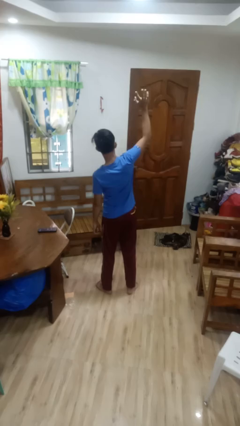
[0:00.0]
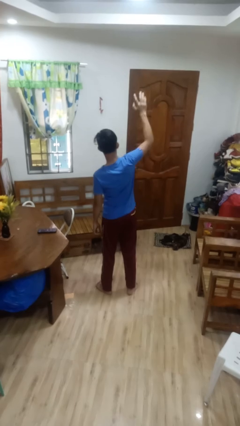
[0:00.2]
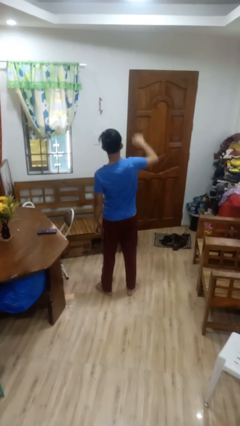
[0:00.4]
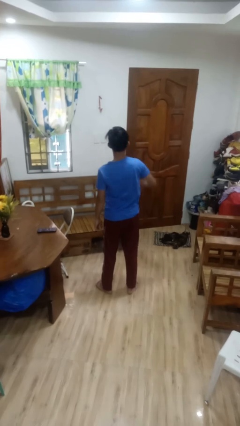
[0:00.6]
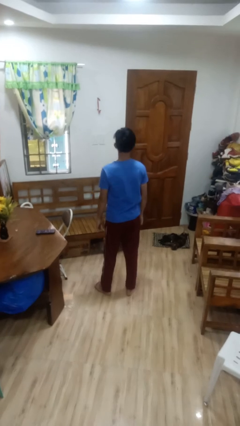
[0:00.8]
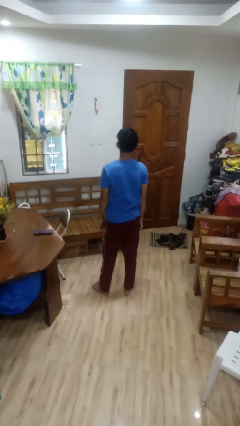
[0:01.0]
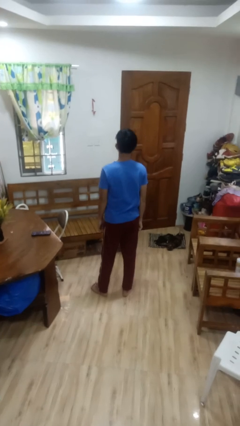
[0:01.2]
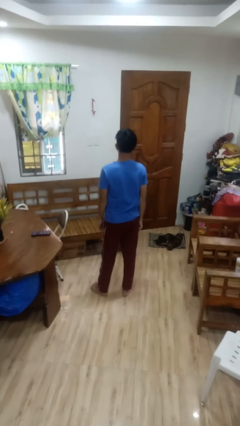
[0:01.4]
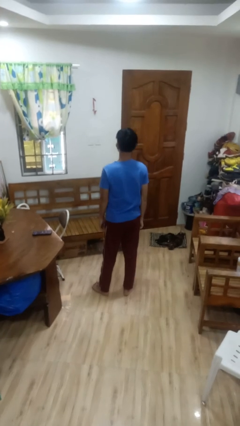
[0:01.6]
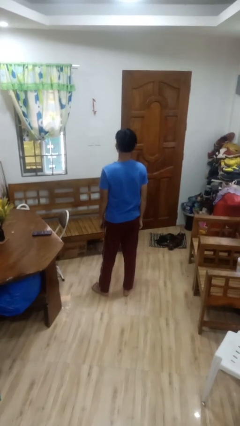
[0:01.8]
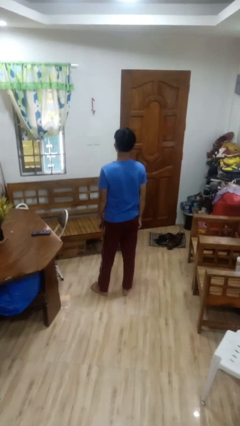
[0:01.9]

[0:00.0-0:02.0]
person gestures lower hand

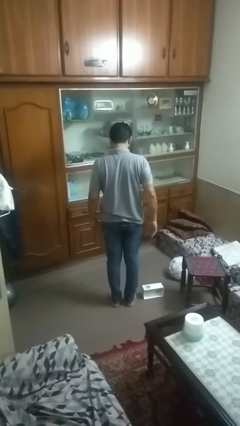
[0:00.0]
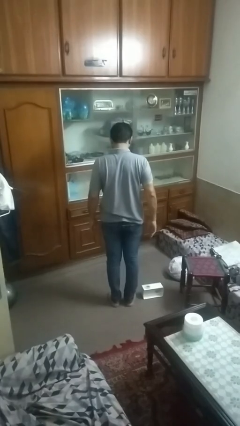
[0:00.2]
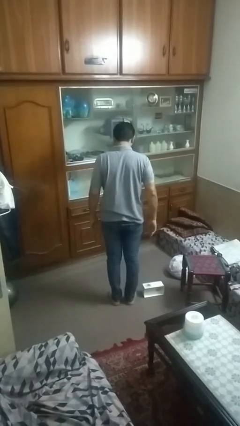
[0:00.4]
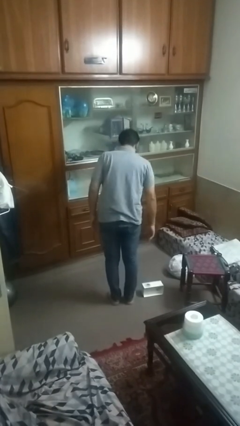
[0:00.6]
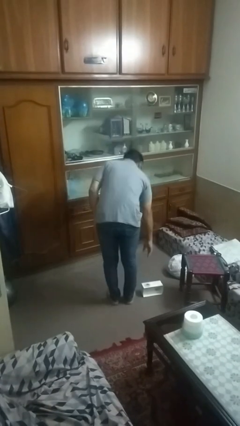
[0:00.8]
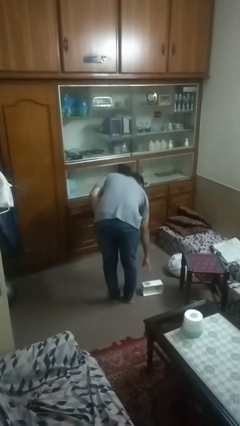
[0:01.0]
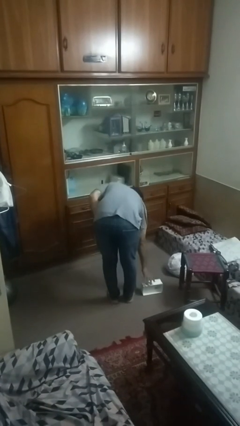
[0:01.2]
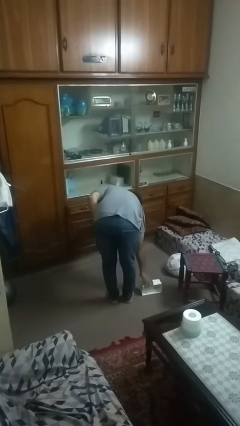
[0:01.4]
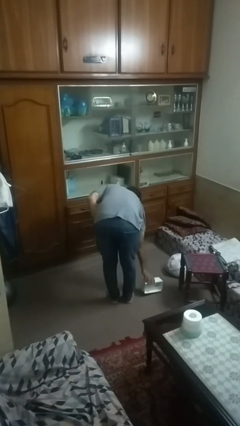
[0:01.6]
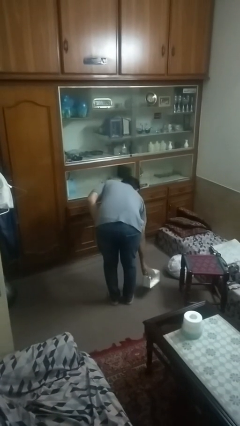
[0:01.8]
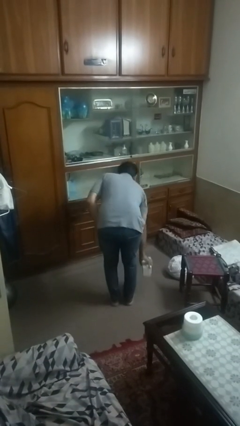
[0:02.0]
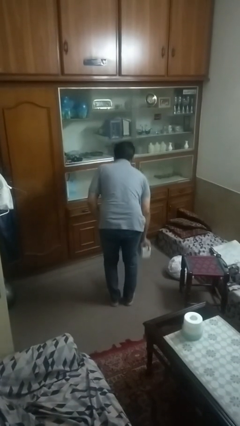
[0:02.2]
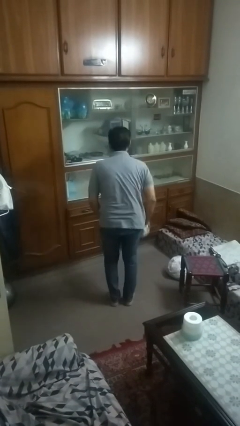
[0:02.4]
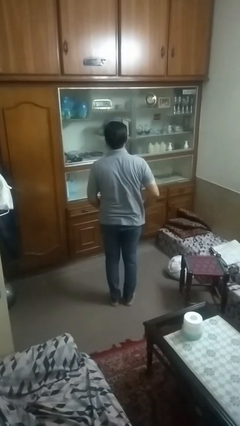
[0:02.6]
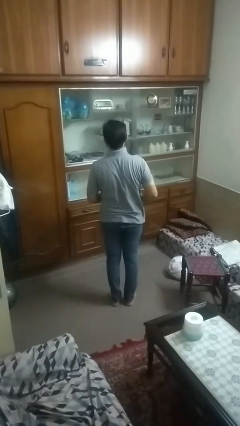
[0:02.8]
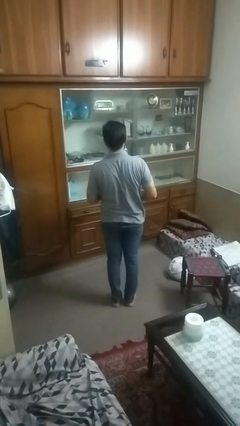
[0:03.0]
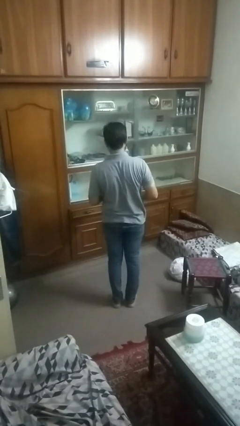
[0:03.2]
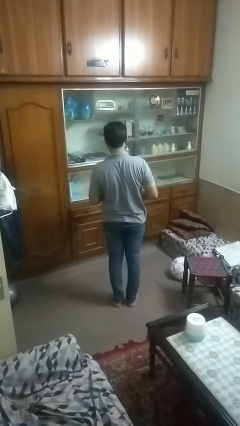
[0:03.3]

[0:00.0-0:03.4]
person picks up object from floor

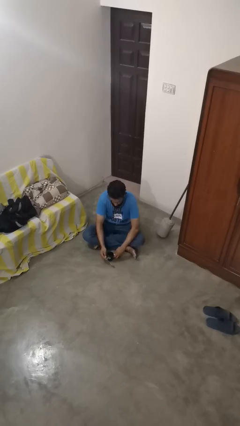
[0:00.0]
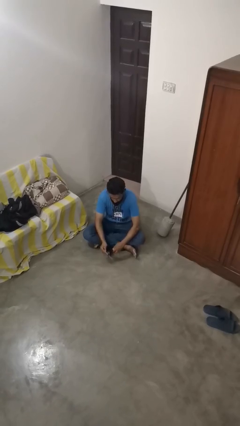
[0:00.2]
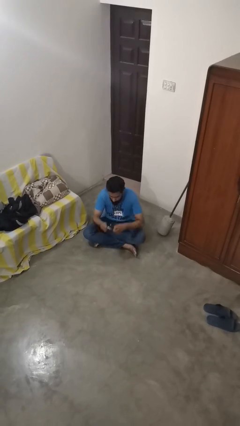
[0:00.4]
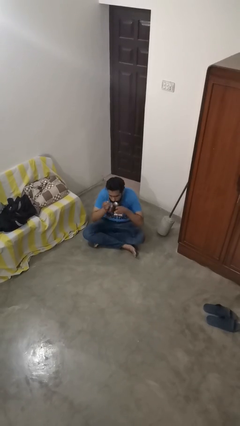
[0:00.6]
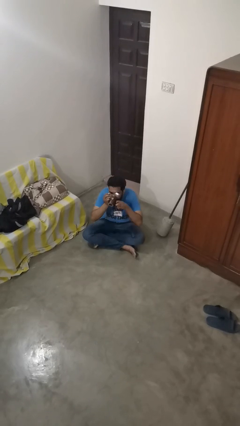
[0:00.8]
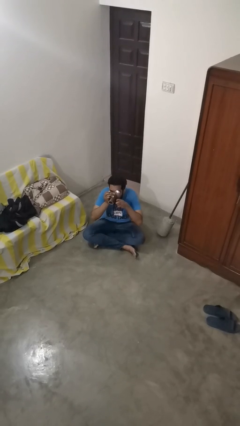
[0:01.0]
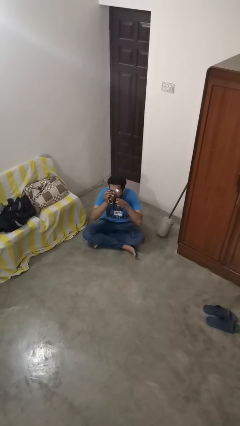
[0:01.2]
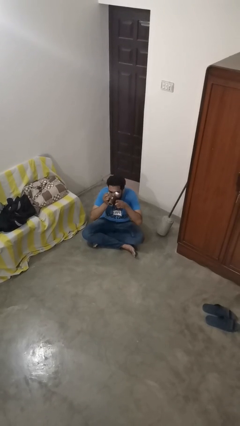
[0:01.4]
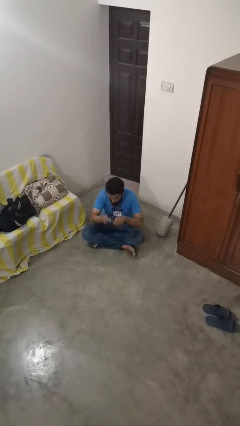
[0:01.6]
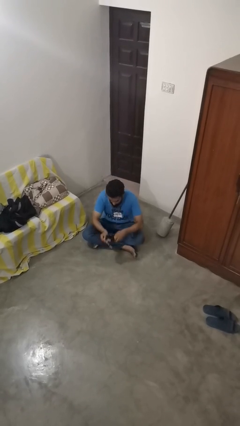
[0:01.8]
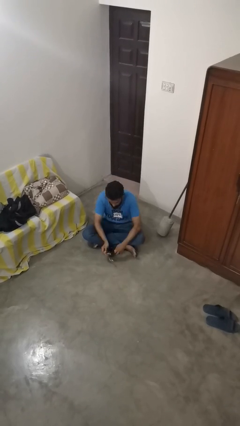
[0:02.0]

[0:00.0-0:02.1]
person drinks from mug

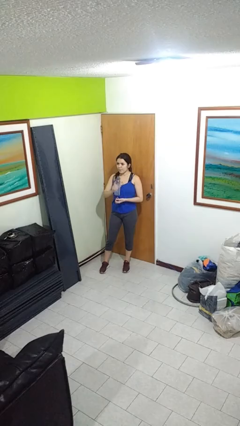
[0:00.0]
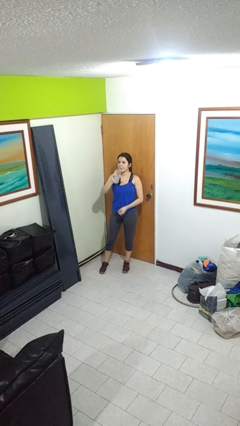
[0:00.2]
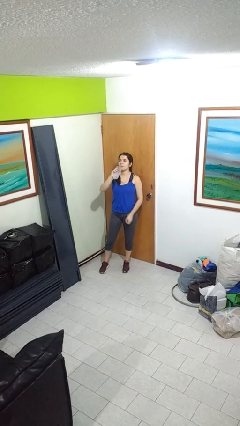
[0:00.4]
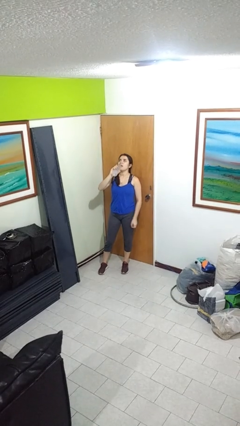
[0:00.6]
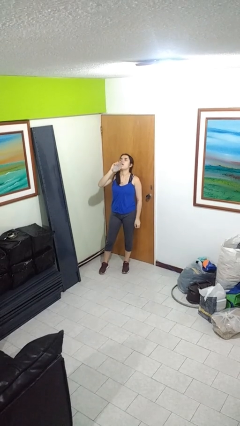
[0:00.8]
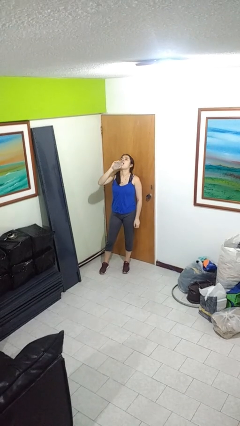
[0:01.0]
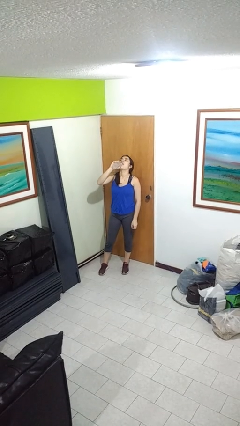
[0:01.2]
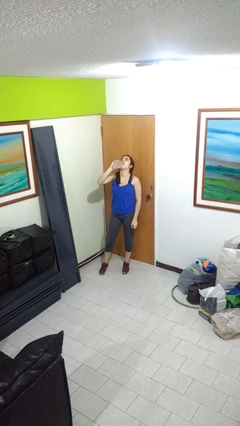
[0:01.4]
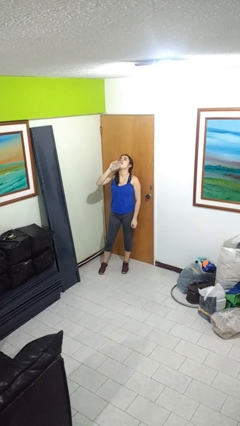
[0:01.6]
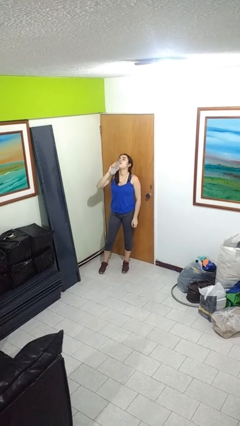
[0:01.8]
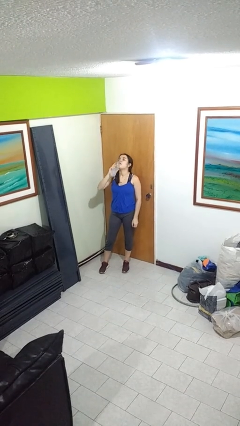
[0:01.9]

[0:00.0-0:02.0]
person drinks from bottle

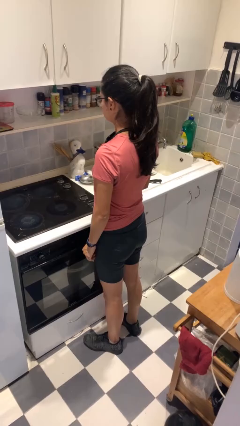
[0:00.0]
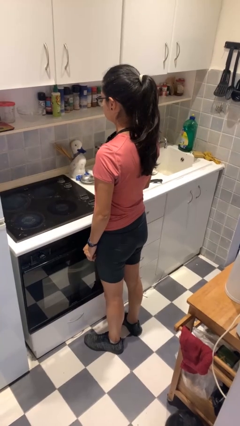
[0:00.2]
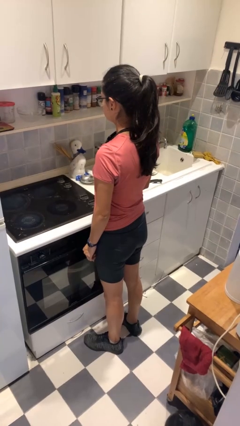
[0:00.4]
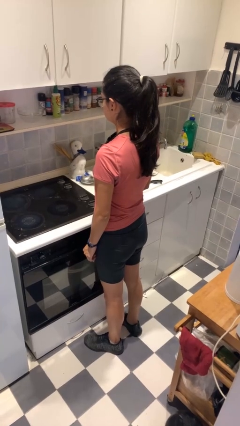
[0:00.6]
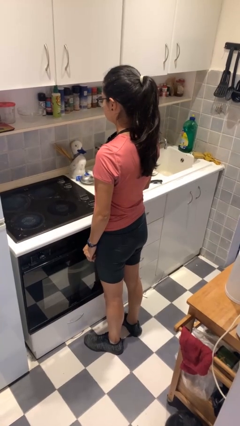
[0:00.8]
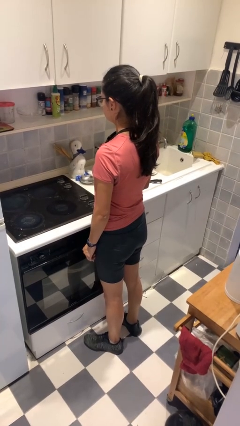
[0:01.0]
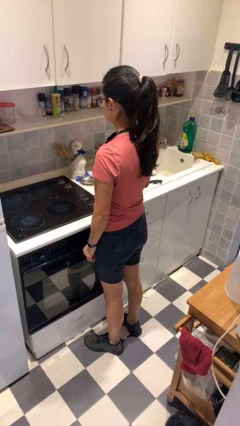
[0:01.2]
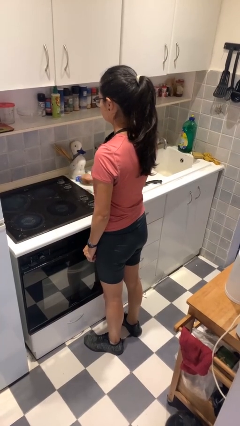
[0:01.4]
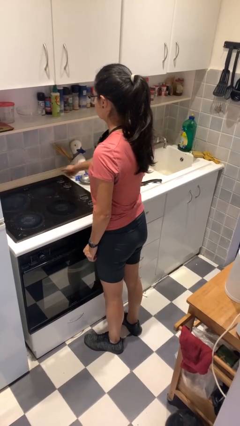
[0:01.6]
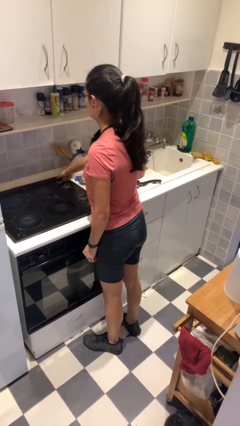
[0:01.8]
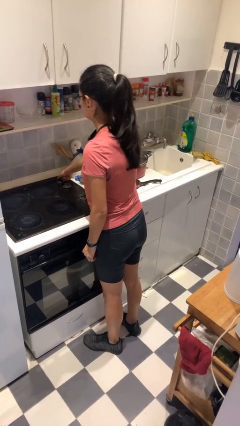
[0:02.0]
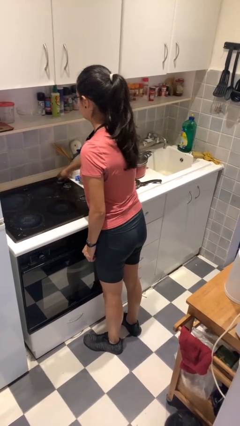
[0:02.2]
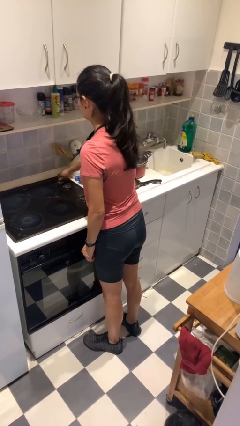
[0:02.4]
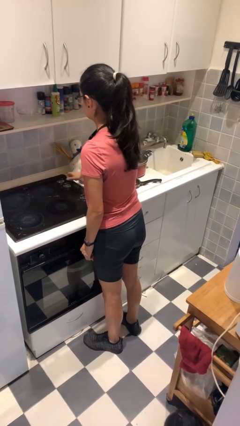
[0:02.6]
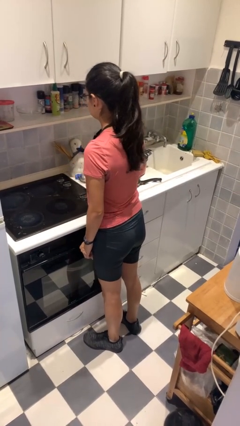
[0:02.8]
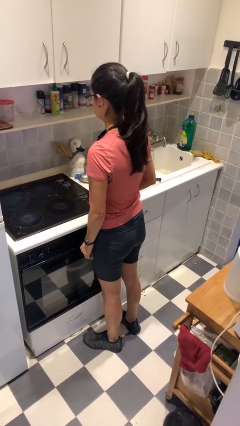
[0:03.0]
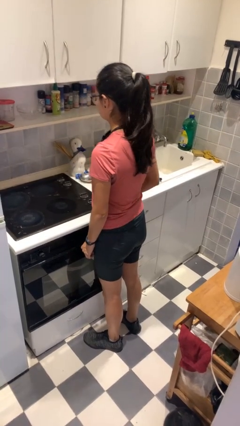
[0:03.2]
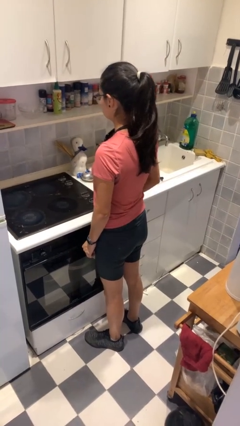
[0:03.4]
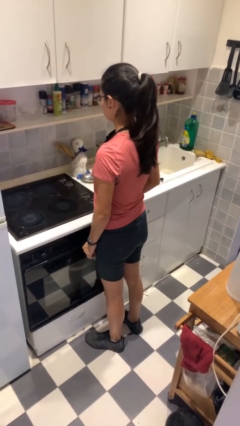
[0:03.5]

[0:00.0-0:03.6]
person turns on stovetop

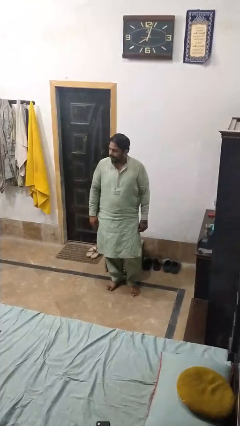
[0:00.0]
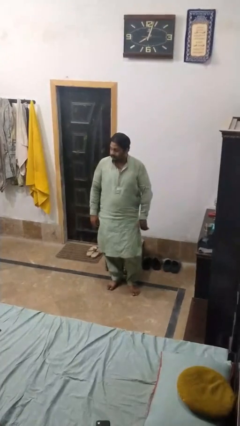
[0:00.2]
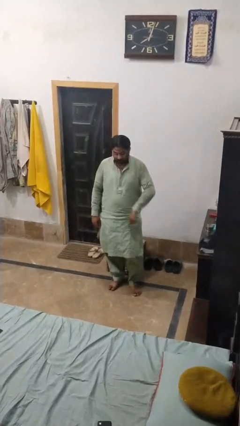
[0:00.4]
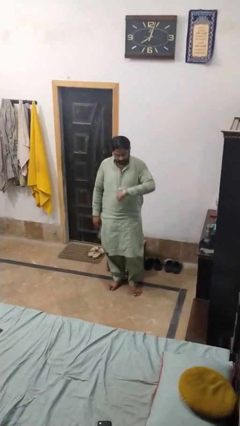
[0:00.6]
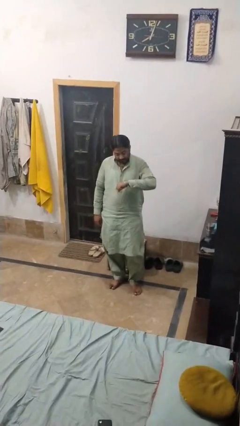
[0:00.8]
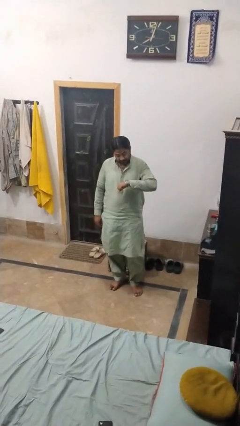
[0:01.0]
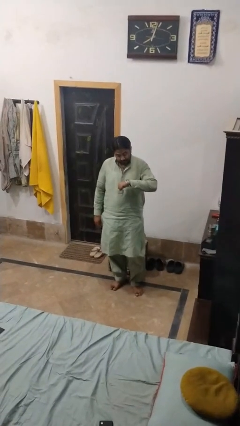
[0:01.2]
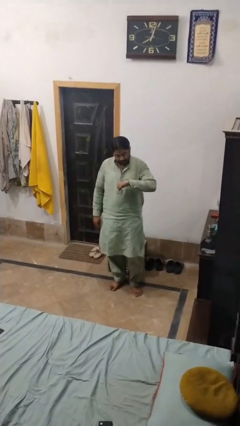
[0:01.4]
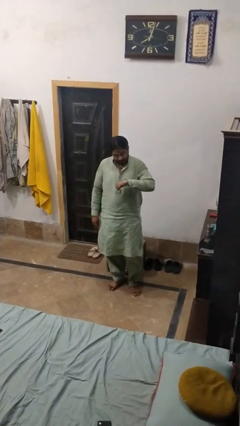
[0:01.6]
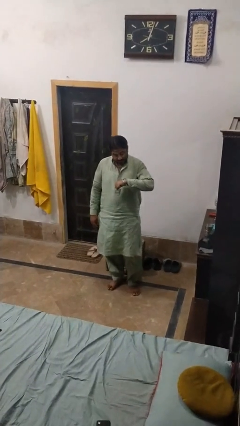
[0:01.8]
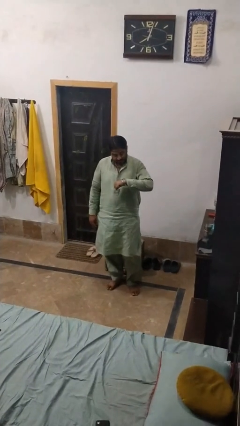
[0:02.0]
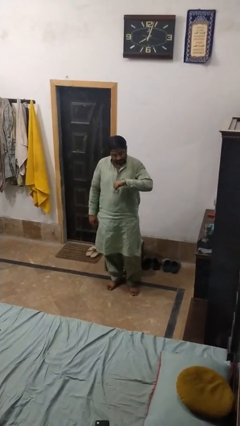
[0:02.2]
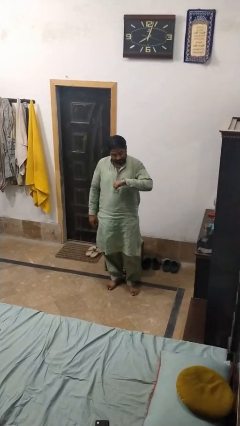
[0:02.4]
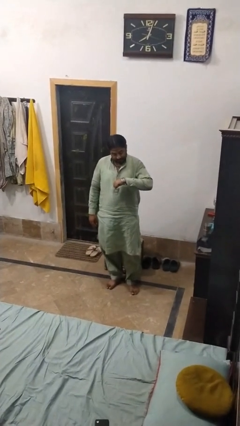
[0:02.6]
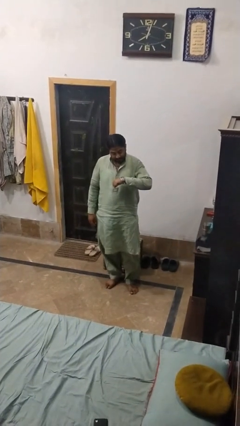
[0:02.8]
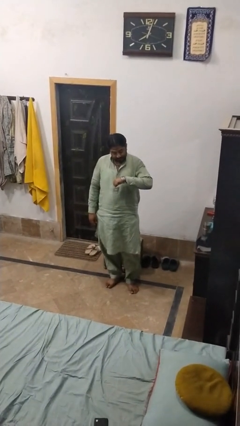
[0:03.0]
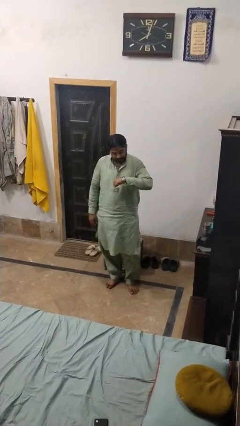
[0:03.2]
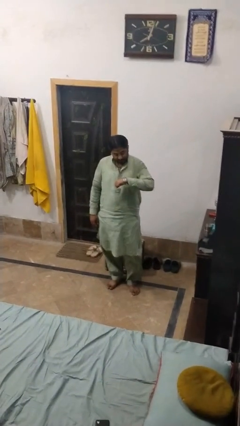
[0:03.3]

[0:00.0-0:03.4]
person looks at wristwatch

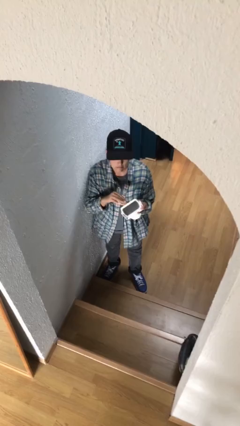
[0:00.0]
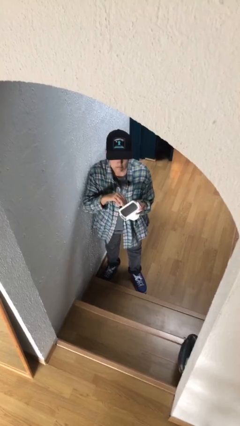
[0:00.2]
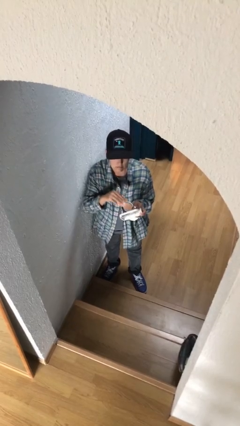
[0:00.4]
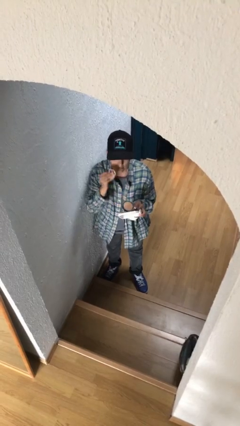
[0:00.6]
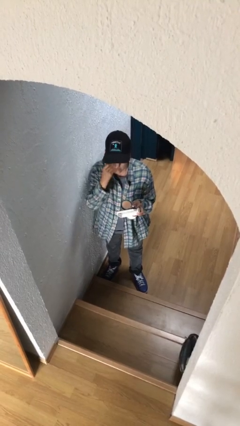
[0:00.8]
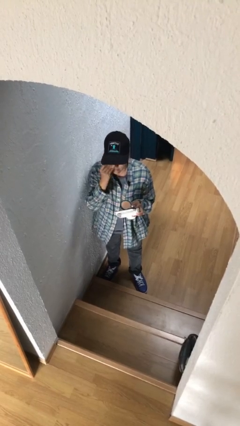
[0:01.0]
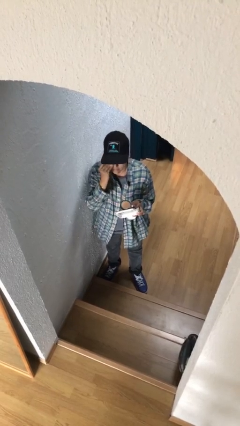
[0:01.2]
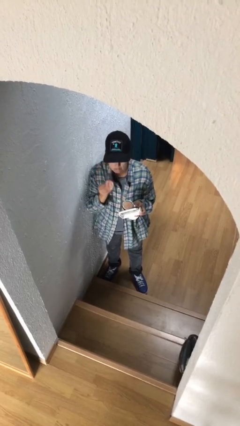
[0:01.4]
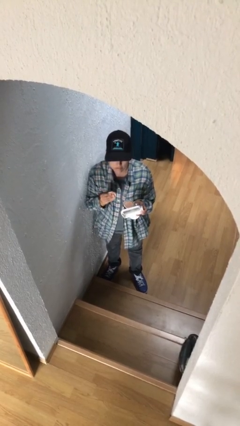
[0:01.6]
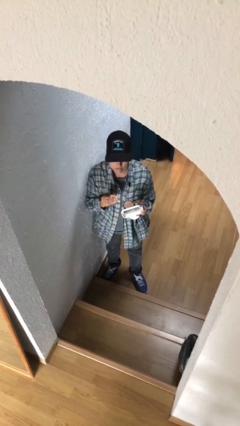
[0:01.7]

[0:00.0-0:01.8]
person applies foundation makeup
